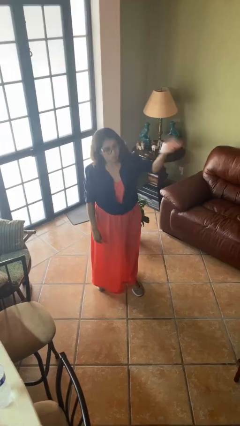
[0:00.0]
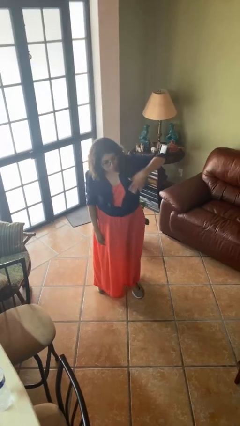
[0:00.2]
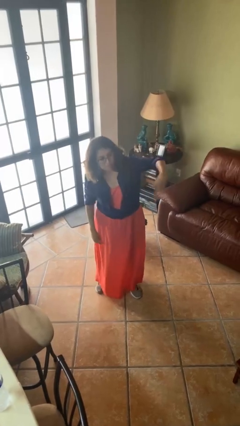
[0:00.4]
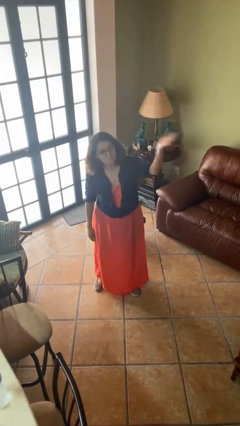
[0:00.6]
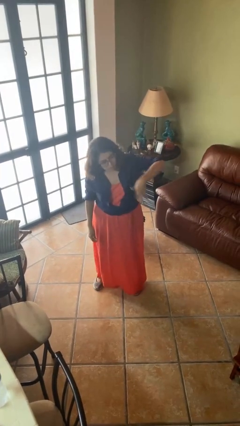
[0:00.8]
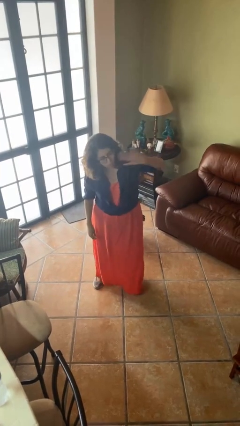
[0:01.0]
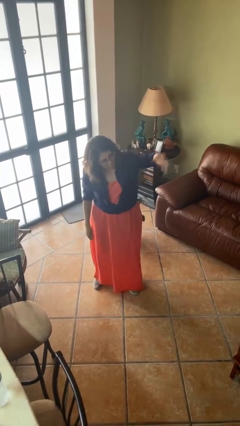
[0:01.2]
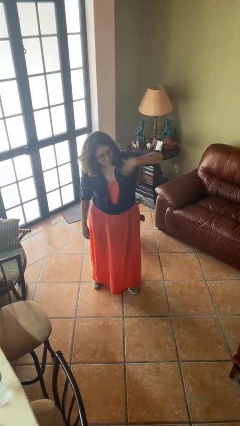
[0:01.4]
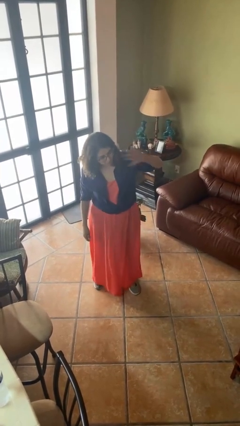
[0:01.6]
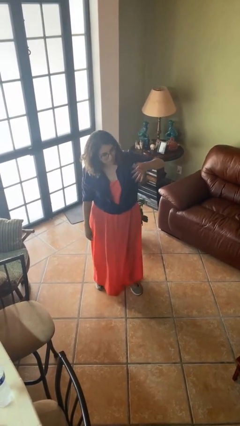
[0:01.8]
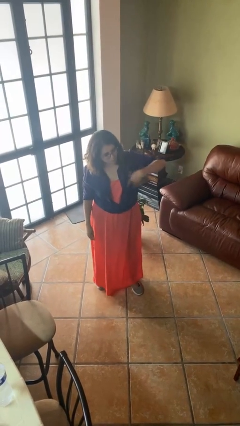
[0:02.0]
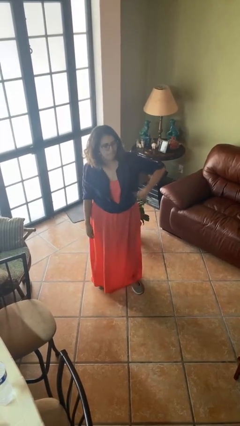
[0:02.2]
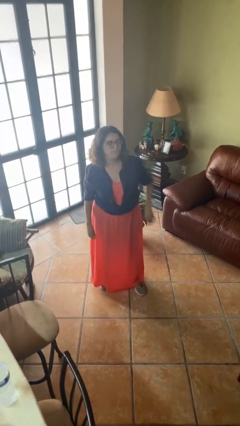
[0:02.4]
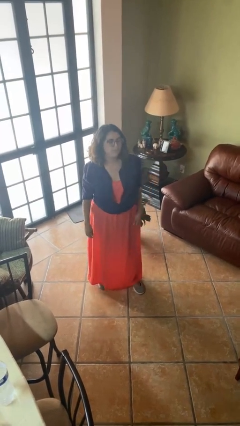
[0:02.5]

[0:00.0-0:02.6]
person gestures come here

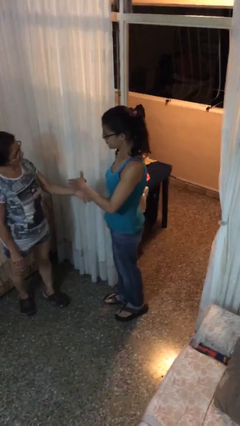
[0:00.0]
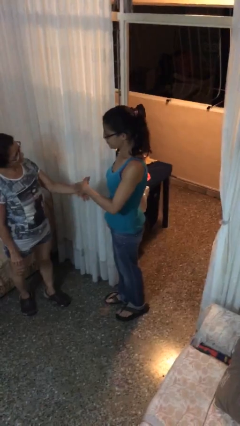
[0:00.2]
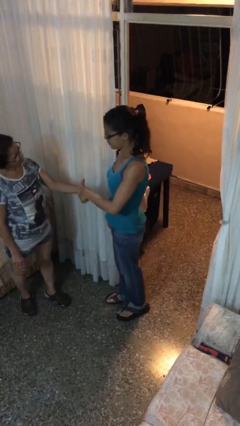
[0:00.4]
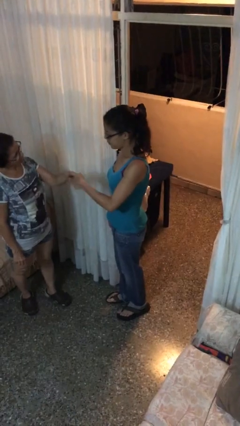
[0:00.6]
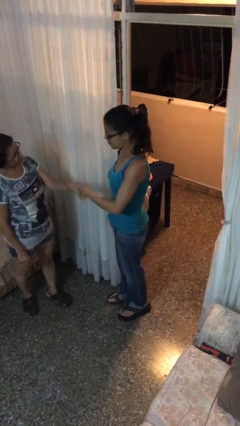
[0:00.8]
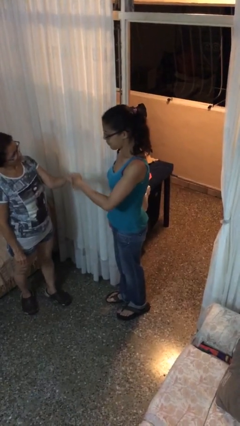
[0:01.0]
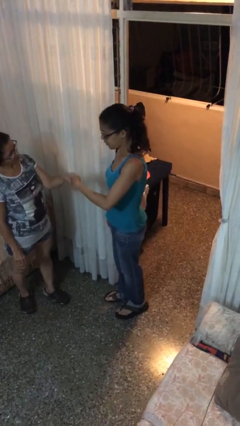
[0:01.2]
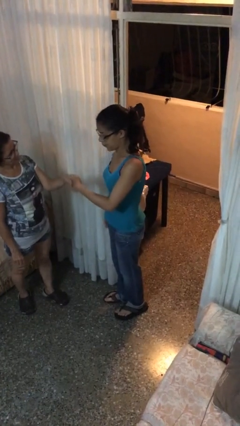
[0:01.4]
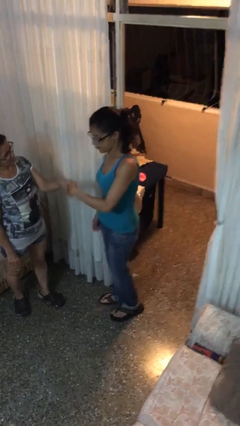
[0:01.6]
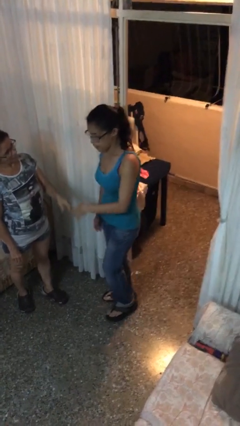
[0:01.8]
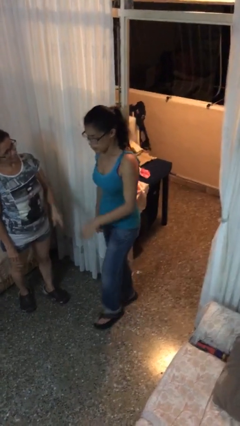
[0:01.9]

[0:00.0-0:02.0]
person shakes hand

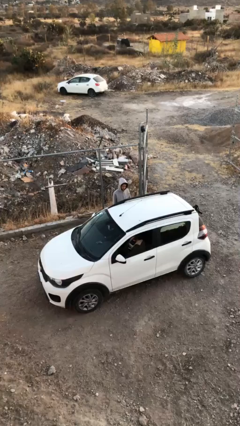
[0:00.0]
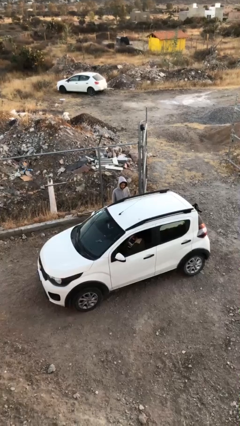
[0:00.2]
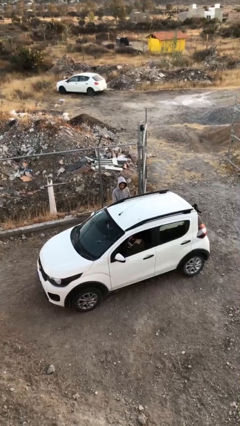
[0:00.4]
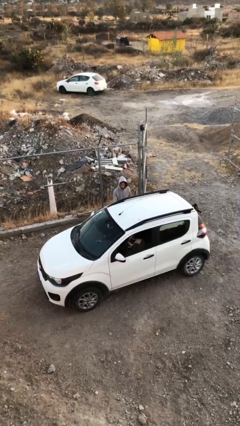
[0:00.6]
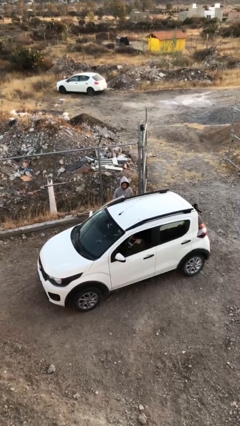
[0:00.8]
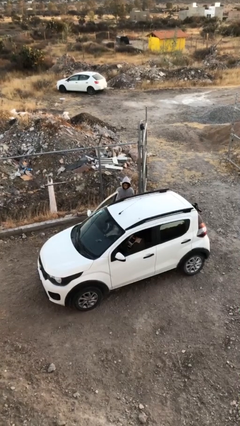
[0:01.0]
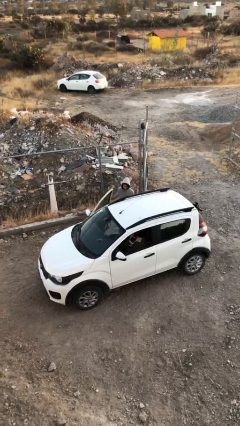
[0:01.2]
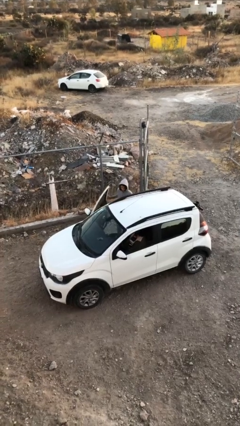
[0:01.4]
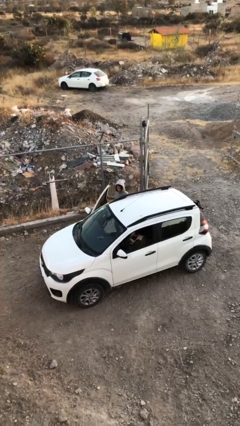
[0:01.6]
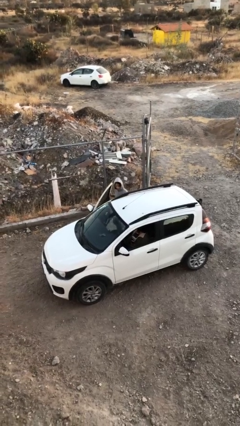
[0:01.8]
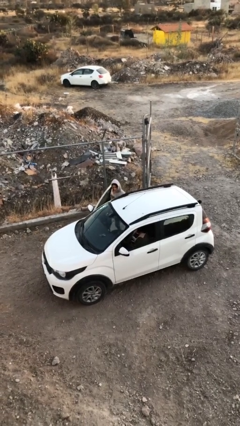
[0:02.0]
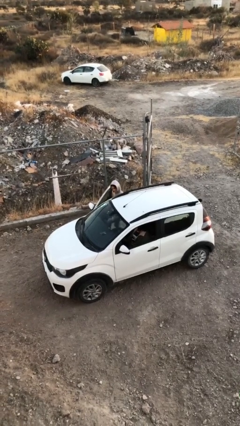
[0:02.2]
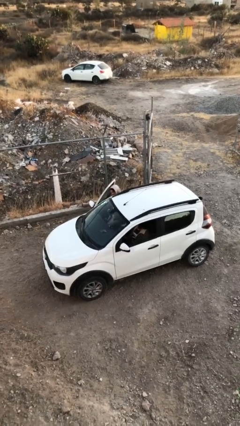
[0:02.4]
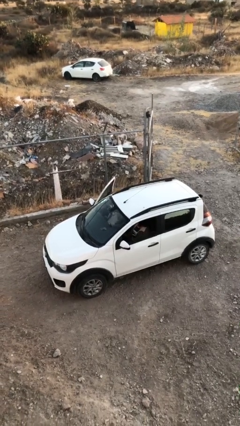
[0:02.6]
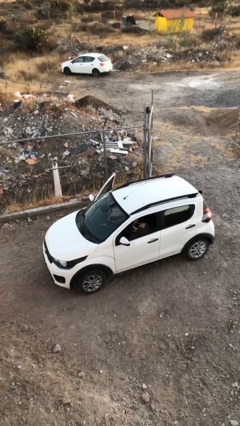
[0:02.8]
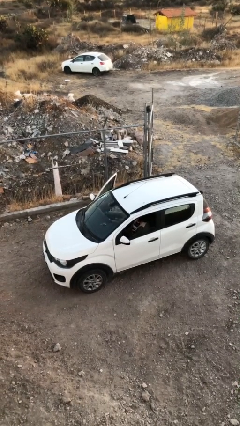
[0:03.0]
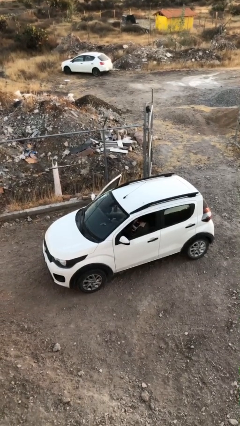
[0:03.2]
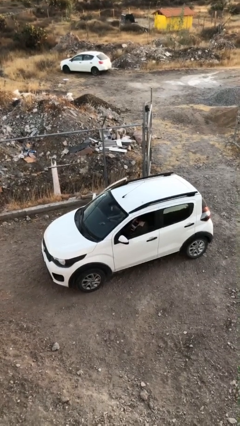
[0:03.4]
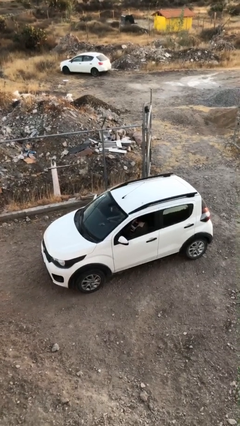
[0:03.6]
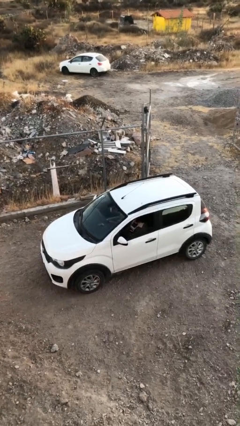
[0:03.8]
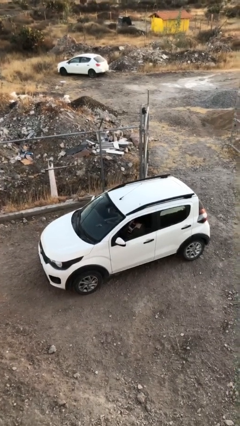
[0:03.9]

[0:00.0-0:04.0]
car picks up person

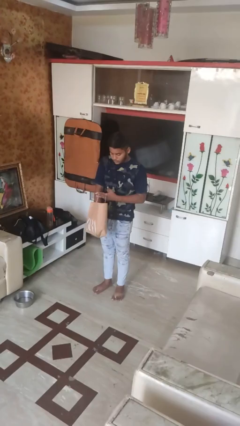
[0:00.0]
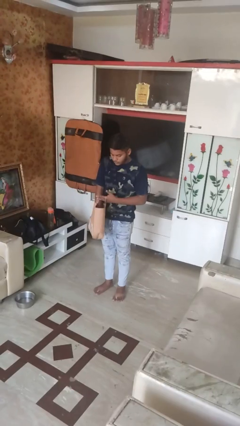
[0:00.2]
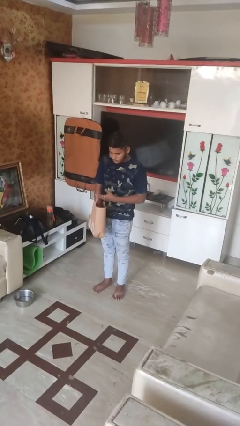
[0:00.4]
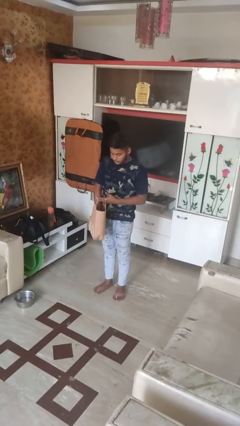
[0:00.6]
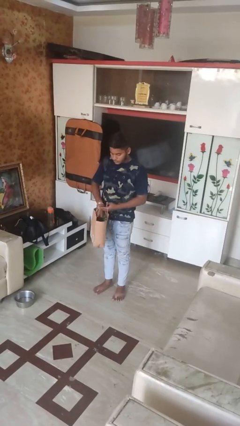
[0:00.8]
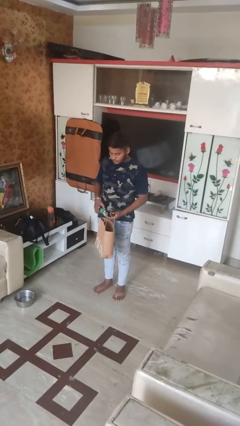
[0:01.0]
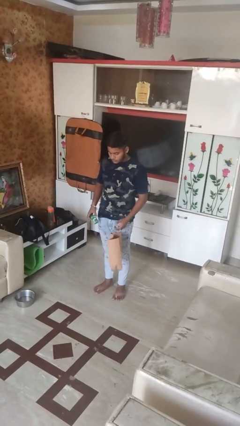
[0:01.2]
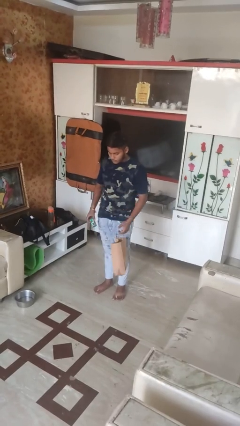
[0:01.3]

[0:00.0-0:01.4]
person takes object from bag

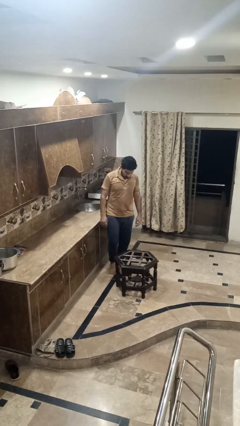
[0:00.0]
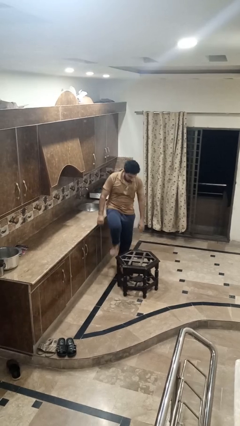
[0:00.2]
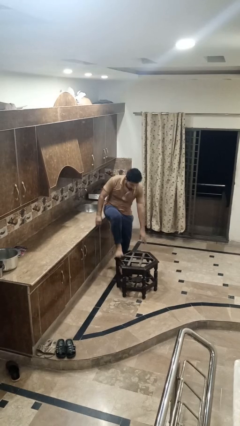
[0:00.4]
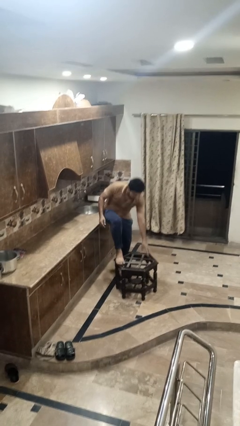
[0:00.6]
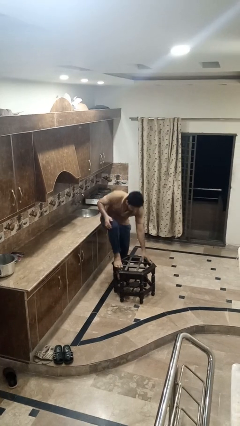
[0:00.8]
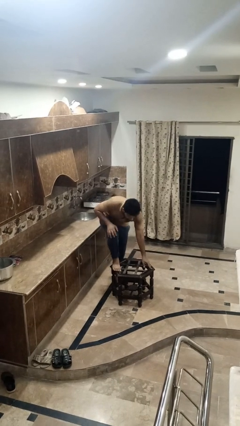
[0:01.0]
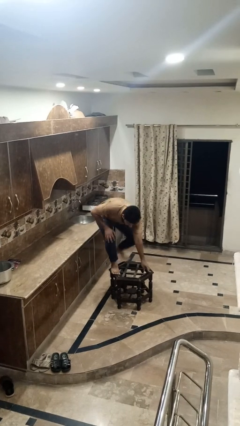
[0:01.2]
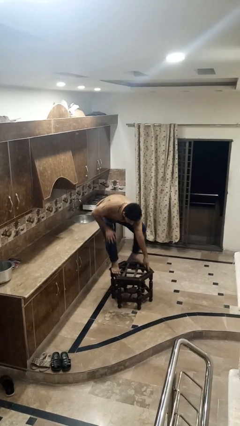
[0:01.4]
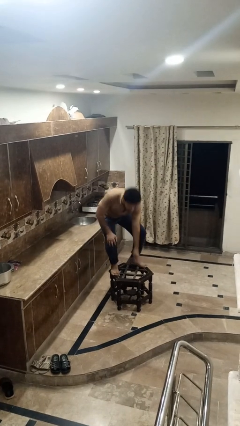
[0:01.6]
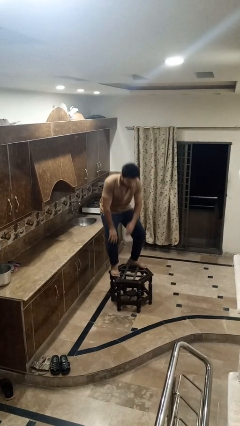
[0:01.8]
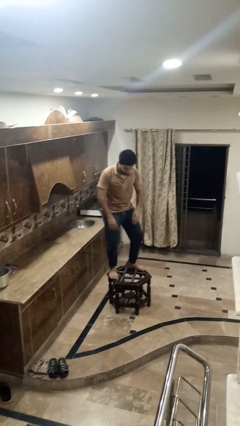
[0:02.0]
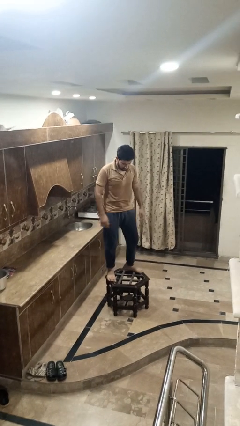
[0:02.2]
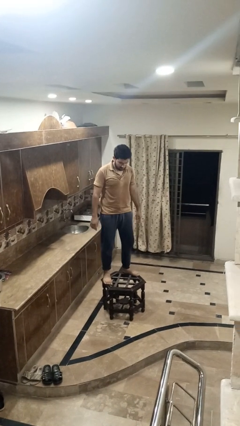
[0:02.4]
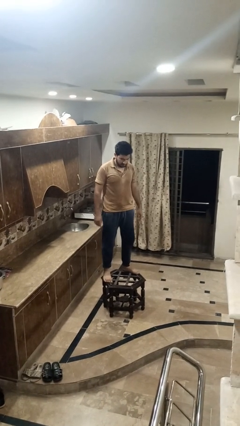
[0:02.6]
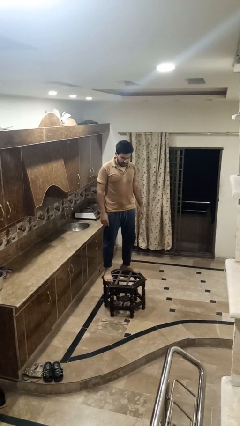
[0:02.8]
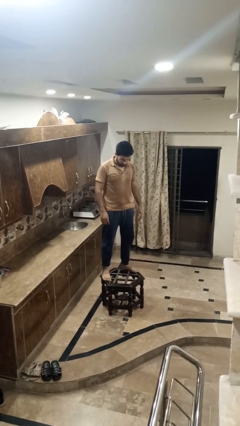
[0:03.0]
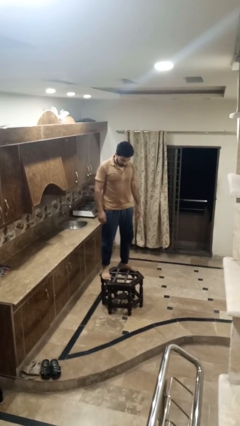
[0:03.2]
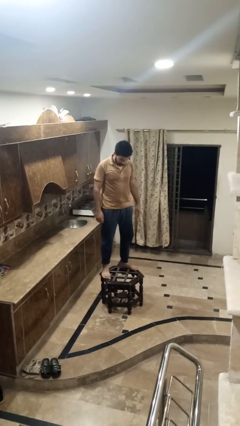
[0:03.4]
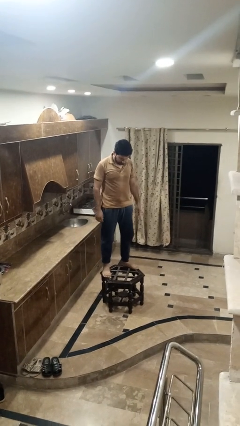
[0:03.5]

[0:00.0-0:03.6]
person climbs on table

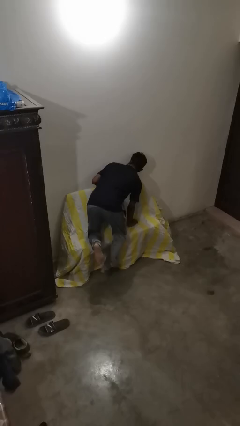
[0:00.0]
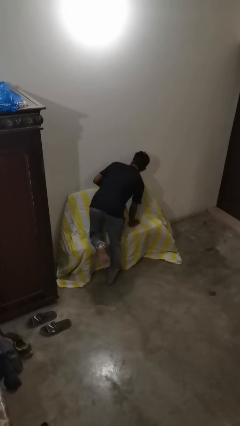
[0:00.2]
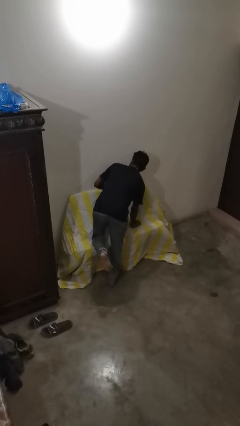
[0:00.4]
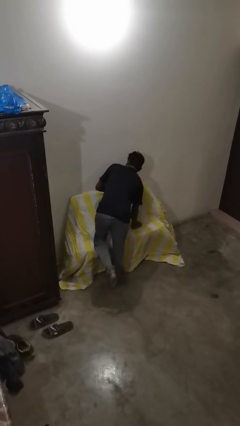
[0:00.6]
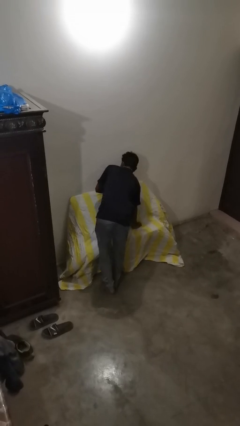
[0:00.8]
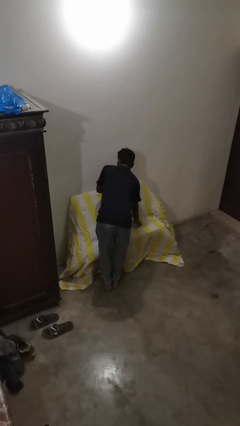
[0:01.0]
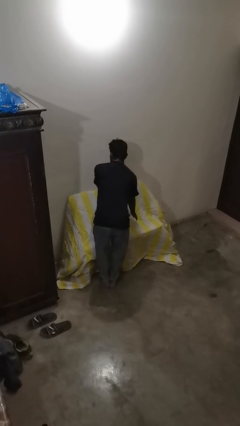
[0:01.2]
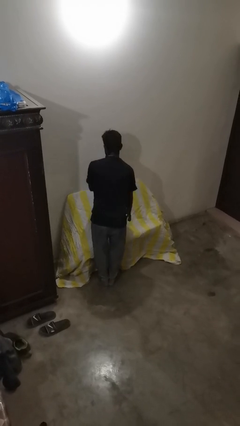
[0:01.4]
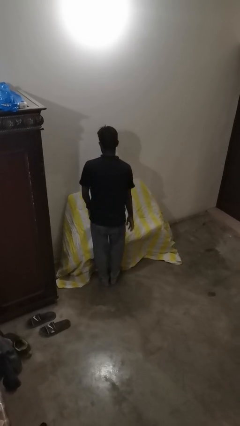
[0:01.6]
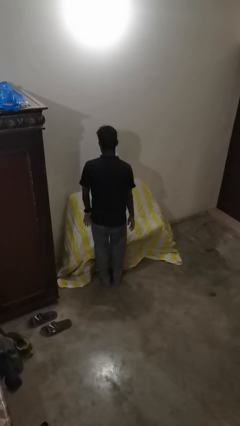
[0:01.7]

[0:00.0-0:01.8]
person stands up

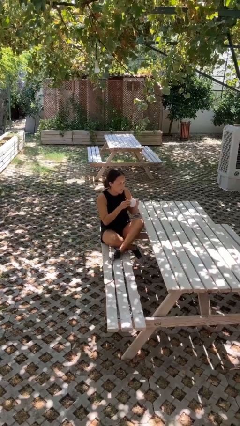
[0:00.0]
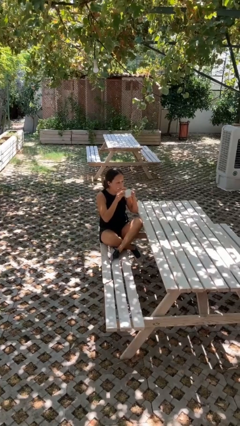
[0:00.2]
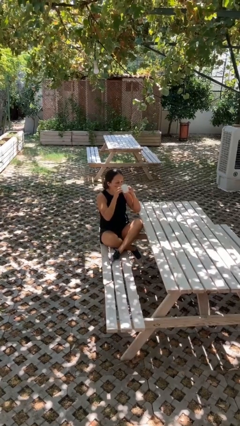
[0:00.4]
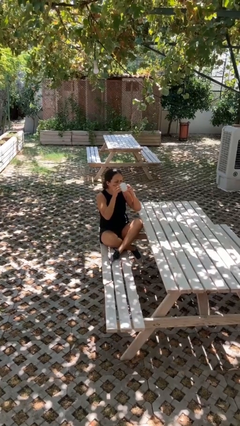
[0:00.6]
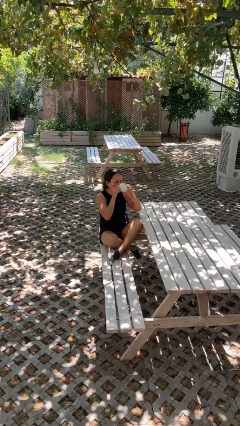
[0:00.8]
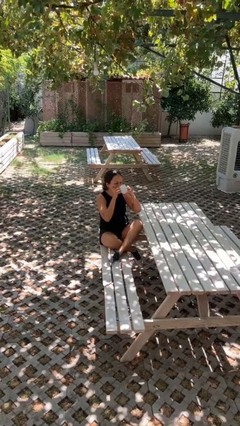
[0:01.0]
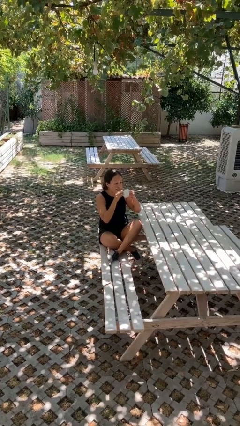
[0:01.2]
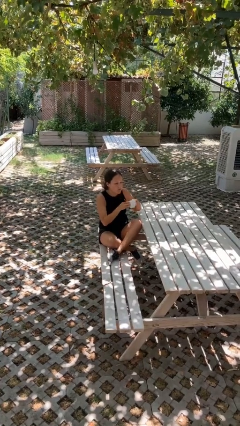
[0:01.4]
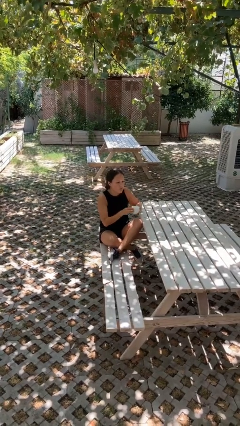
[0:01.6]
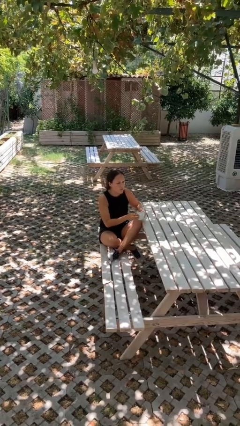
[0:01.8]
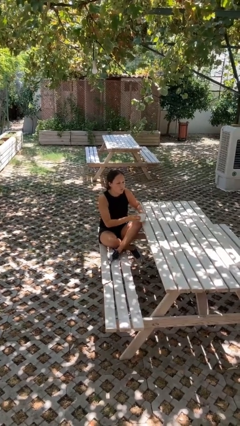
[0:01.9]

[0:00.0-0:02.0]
person drinks from mug
